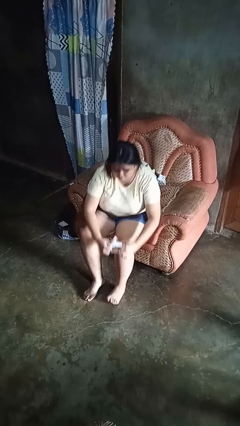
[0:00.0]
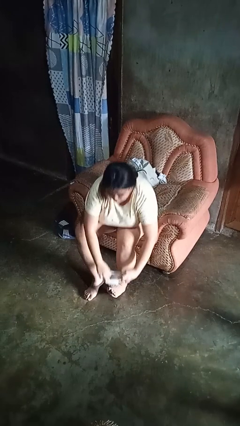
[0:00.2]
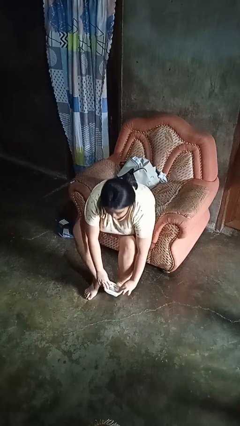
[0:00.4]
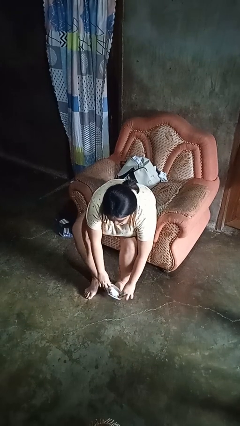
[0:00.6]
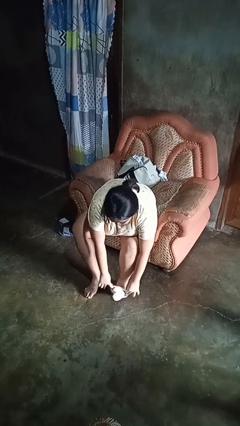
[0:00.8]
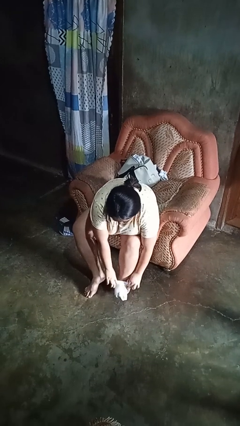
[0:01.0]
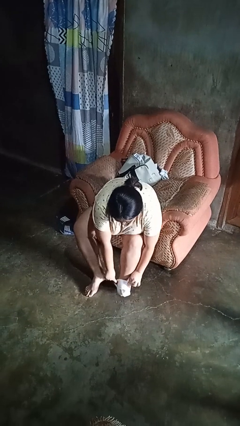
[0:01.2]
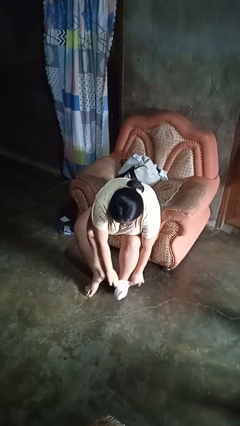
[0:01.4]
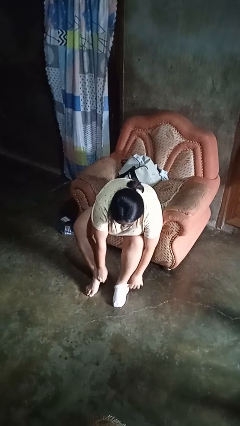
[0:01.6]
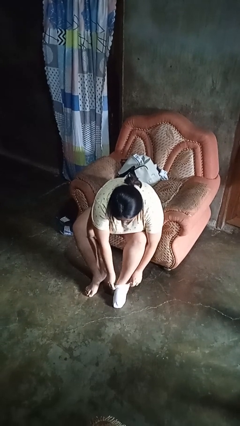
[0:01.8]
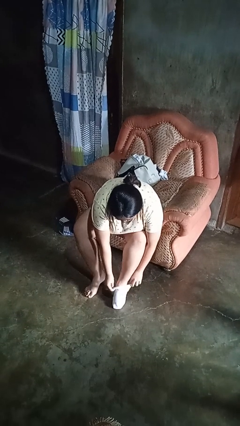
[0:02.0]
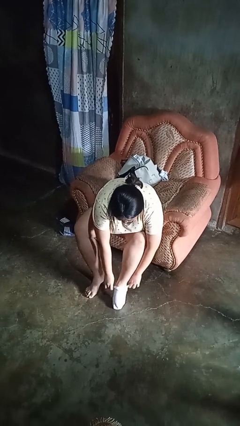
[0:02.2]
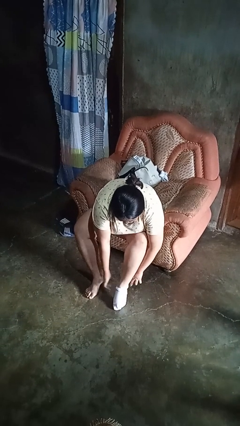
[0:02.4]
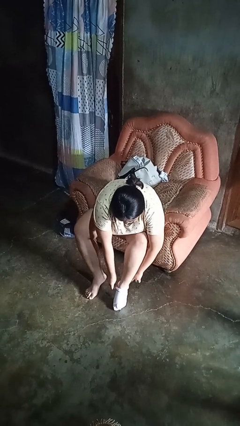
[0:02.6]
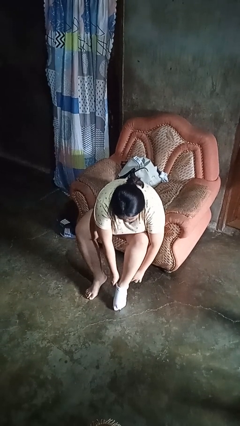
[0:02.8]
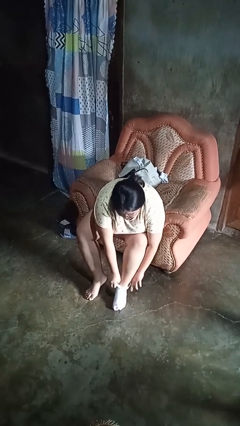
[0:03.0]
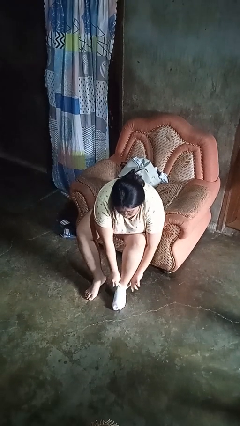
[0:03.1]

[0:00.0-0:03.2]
person puts on socks

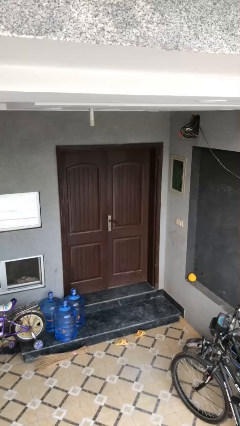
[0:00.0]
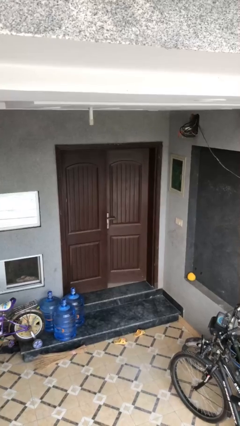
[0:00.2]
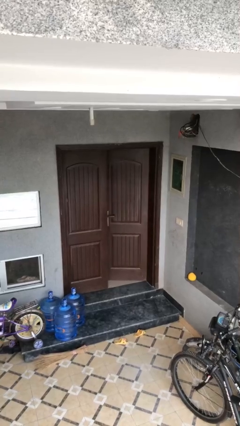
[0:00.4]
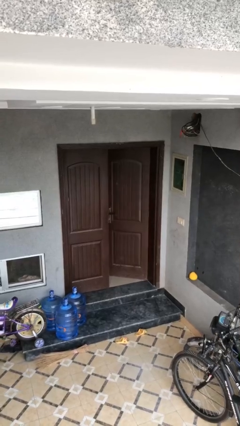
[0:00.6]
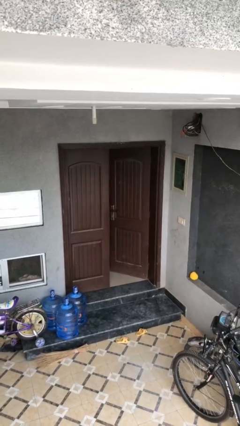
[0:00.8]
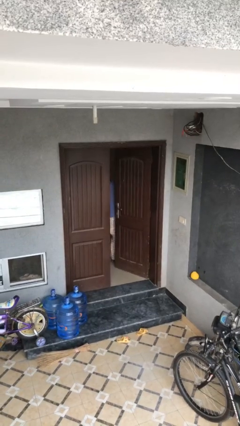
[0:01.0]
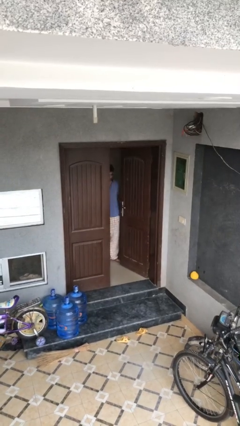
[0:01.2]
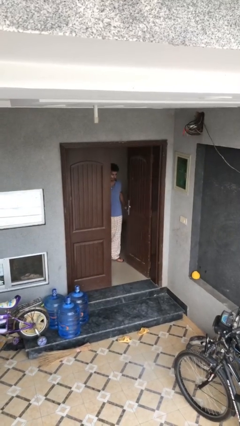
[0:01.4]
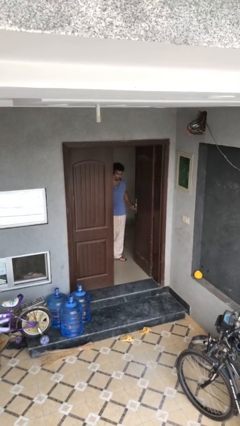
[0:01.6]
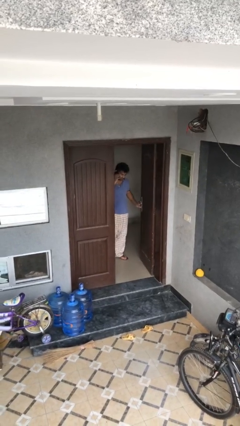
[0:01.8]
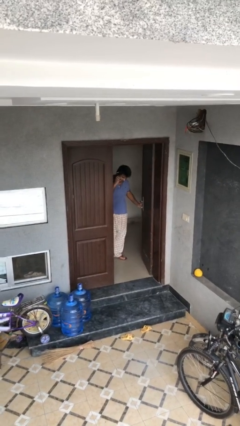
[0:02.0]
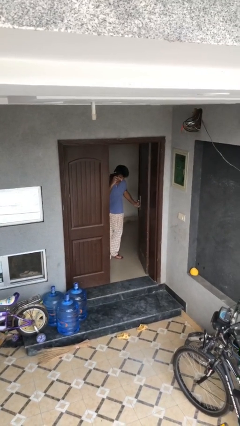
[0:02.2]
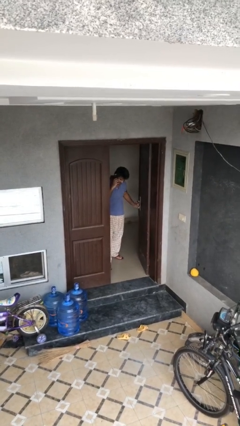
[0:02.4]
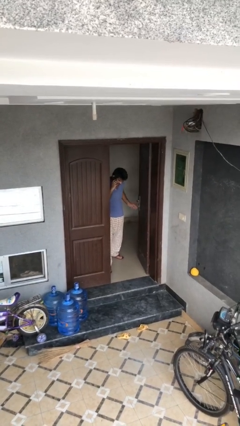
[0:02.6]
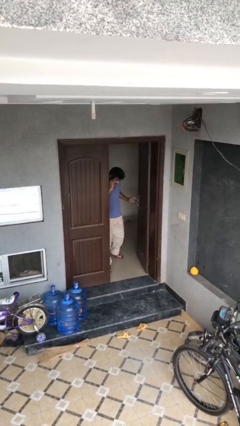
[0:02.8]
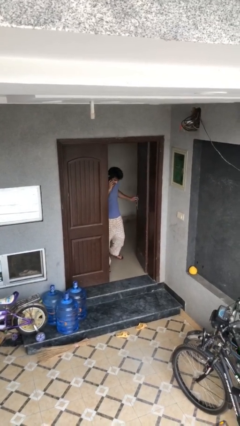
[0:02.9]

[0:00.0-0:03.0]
person opens facility door

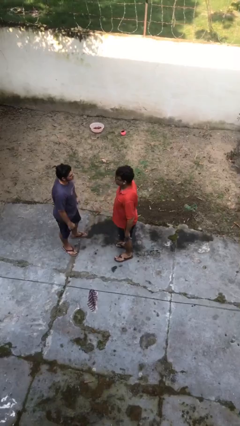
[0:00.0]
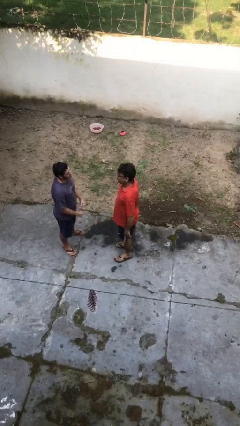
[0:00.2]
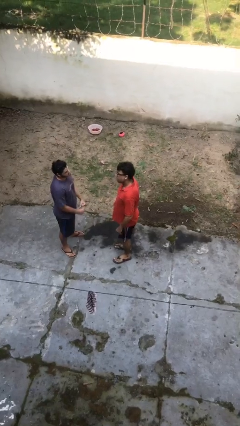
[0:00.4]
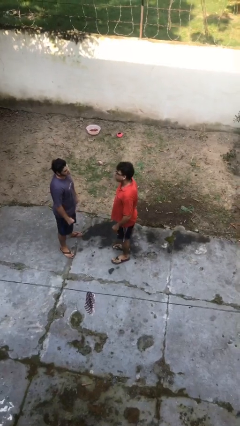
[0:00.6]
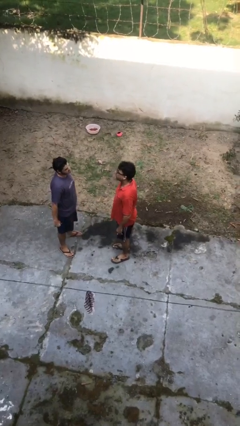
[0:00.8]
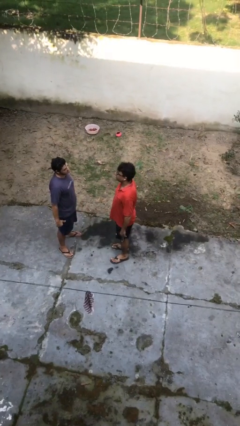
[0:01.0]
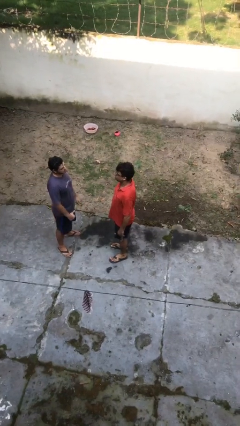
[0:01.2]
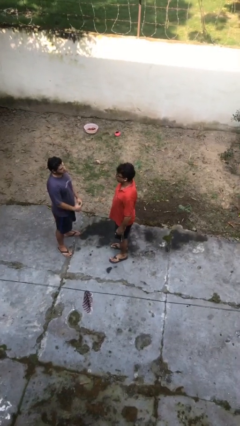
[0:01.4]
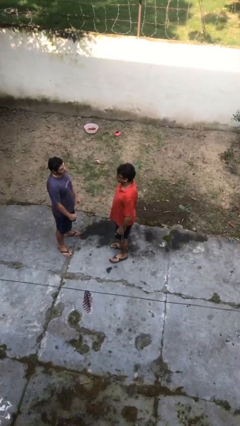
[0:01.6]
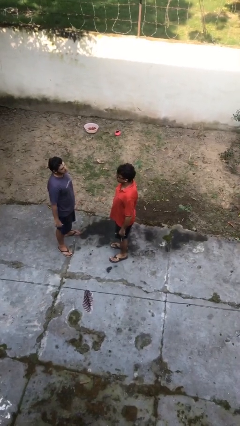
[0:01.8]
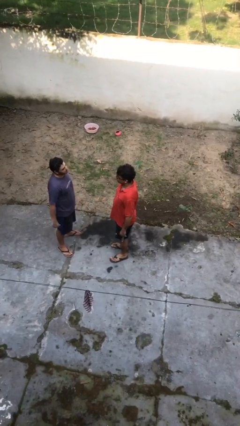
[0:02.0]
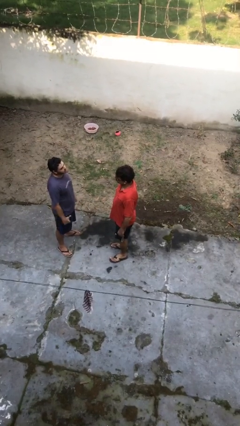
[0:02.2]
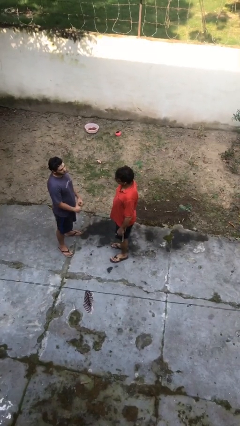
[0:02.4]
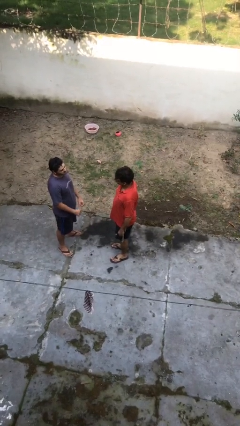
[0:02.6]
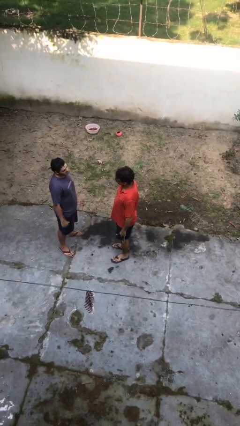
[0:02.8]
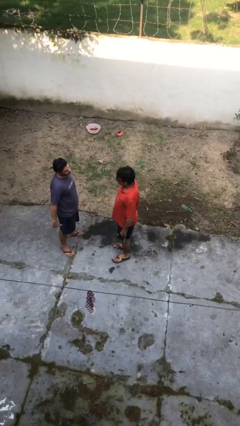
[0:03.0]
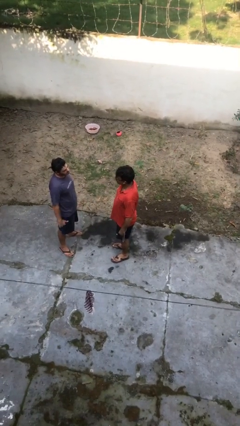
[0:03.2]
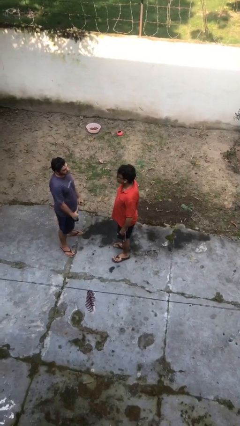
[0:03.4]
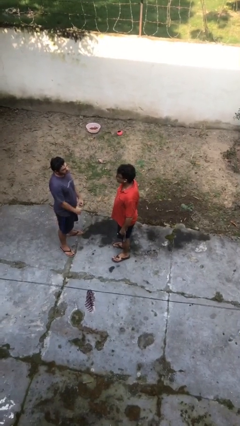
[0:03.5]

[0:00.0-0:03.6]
person talks to person

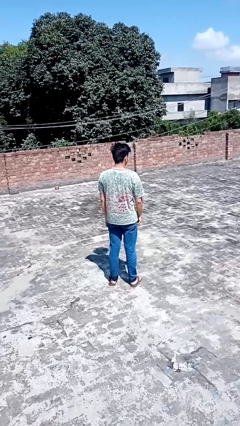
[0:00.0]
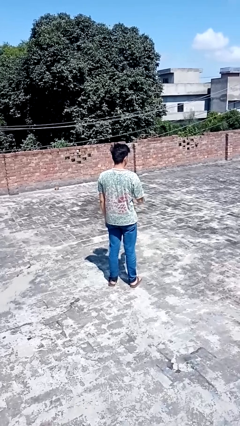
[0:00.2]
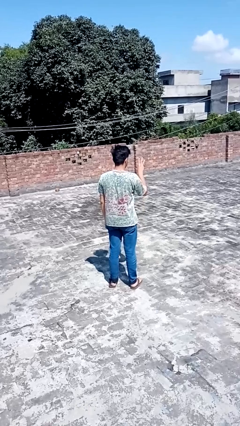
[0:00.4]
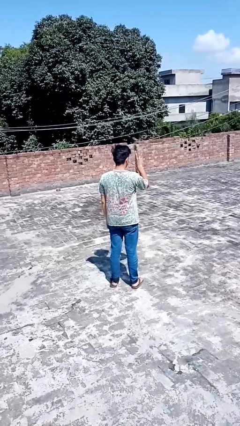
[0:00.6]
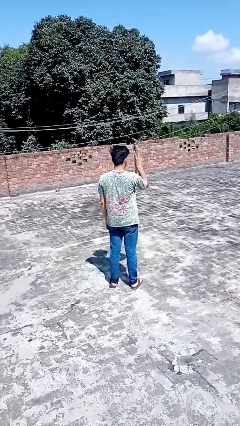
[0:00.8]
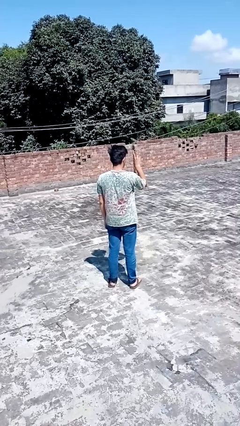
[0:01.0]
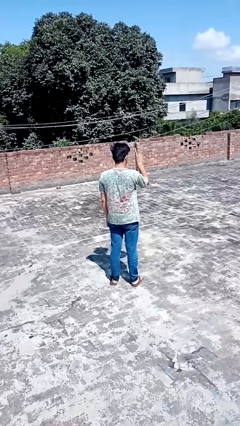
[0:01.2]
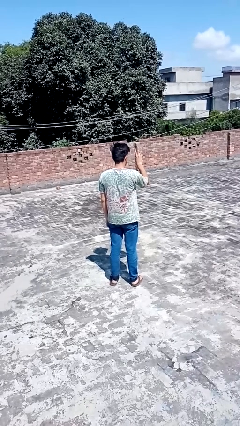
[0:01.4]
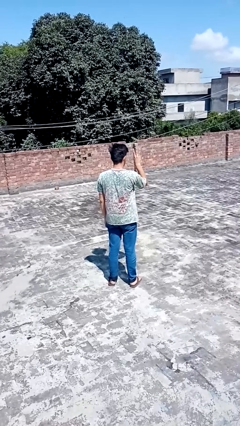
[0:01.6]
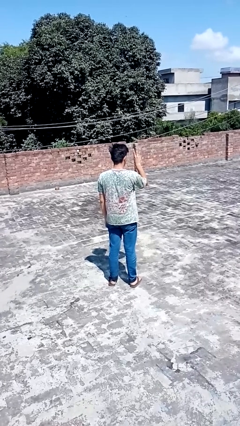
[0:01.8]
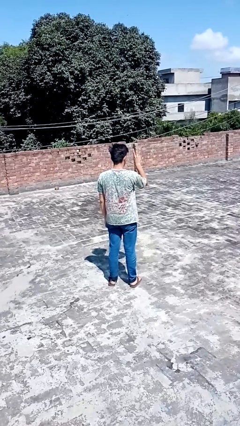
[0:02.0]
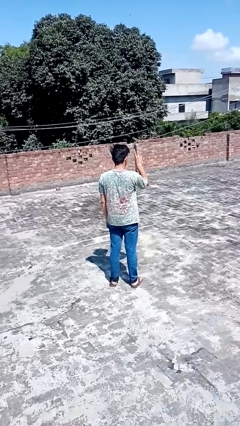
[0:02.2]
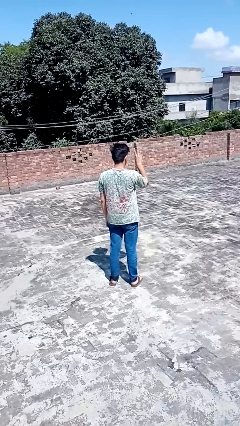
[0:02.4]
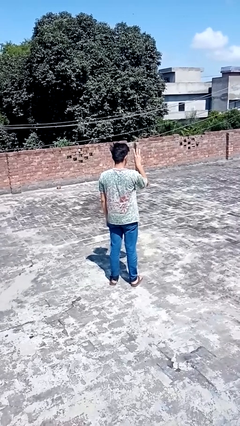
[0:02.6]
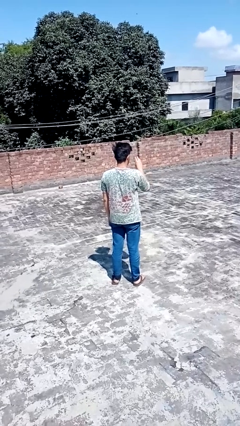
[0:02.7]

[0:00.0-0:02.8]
person gestures number three

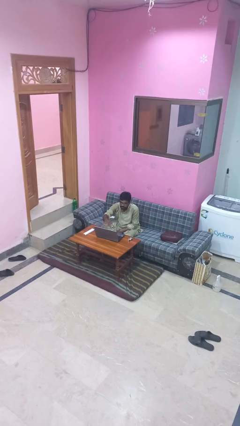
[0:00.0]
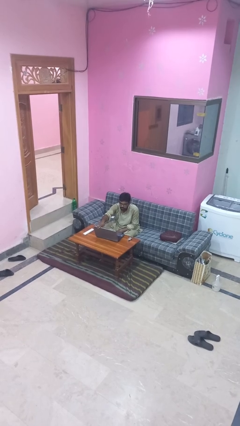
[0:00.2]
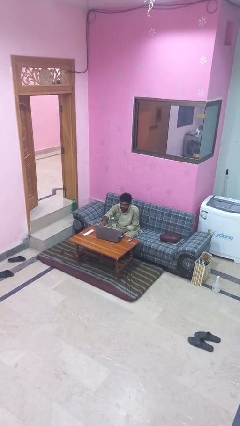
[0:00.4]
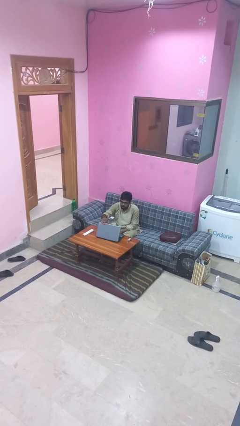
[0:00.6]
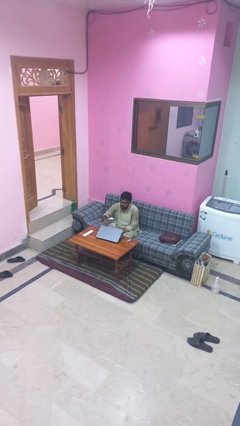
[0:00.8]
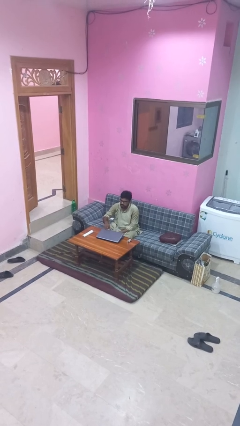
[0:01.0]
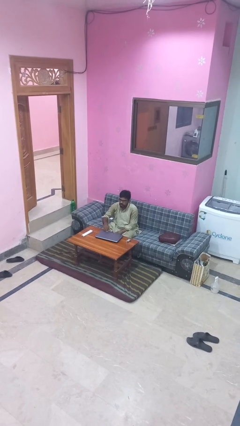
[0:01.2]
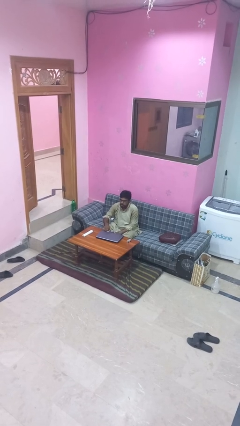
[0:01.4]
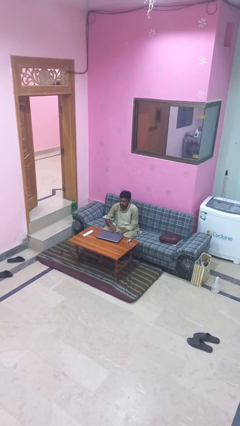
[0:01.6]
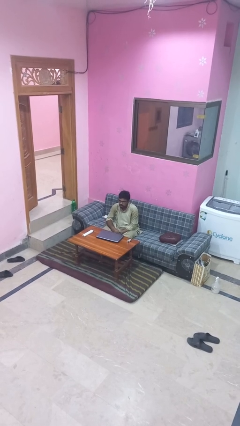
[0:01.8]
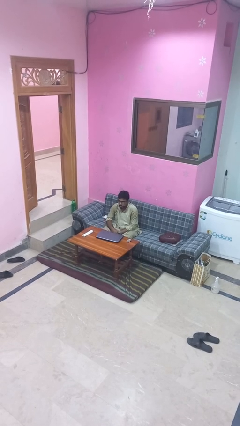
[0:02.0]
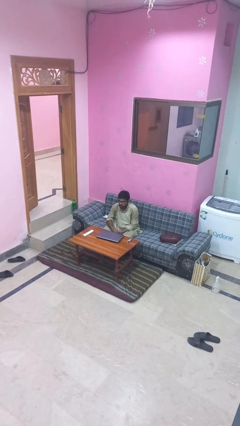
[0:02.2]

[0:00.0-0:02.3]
person closes laptop

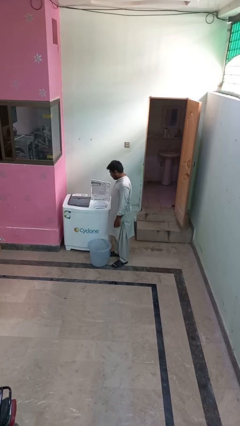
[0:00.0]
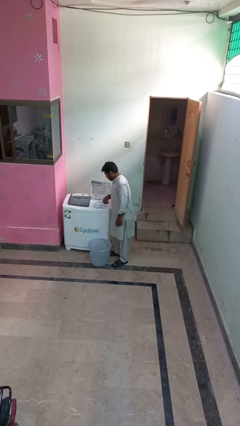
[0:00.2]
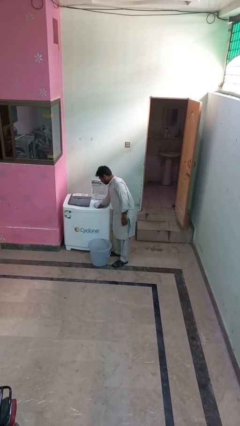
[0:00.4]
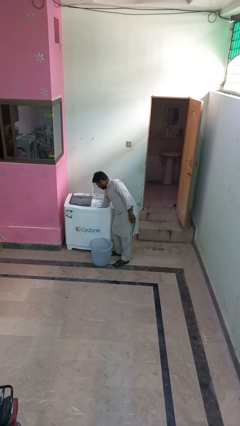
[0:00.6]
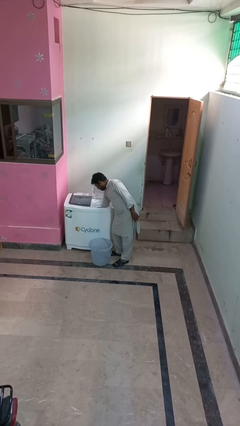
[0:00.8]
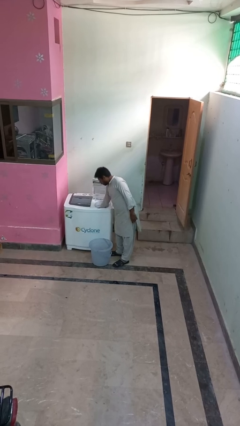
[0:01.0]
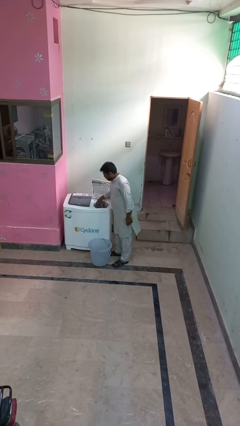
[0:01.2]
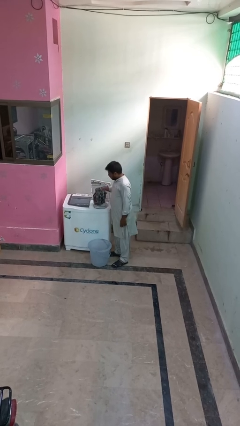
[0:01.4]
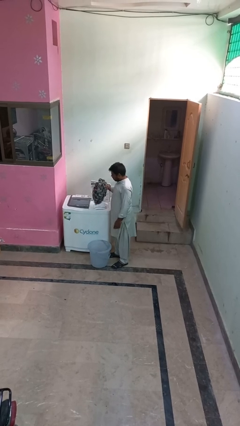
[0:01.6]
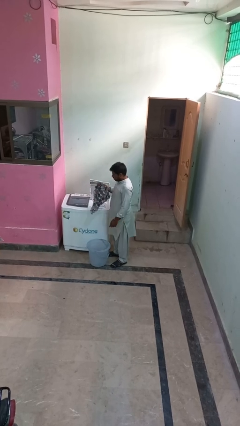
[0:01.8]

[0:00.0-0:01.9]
person unloads dryer

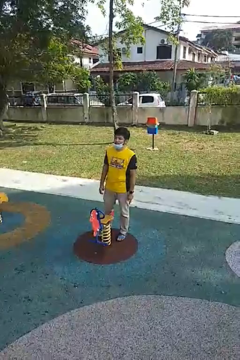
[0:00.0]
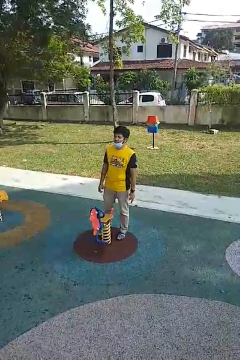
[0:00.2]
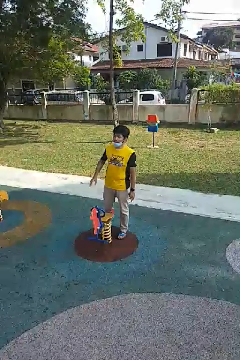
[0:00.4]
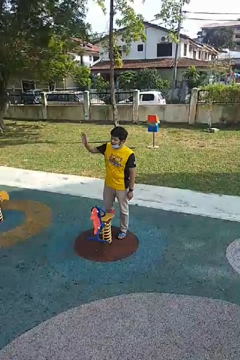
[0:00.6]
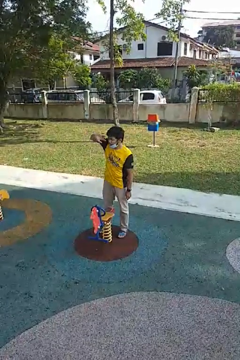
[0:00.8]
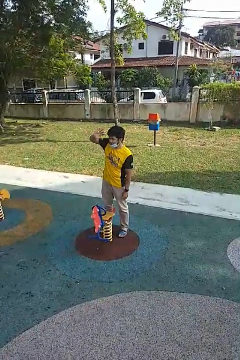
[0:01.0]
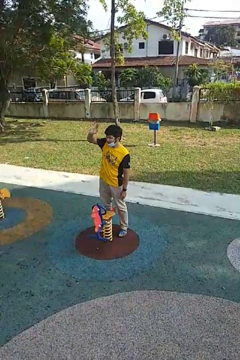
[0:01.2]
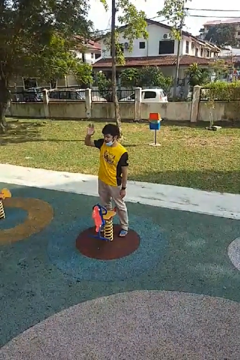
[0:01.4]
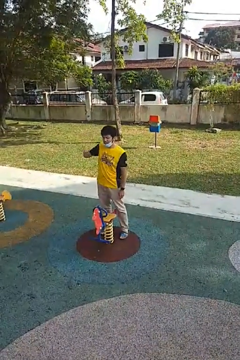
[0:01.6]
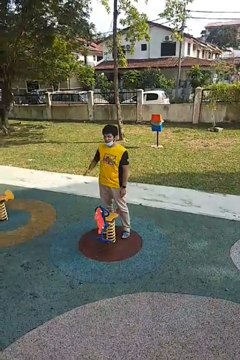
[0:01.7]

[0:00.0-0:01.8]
person waves at person
